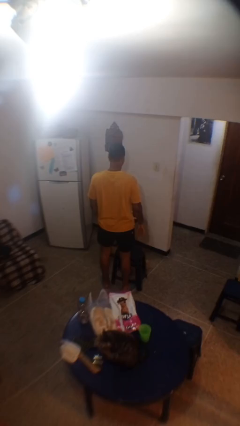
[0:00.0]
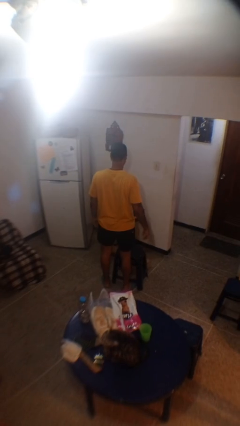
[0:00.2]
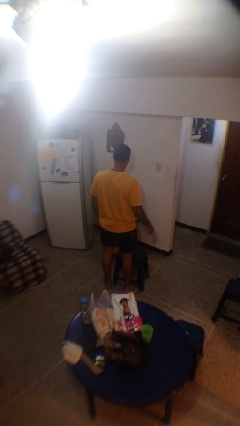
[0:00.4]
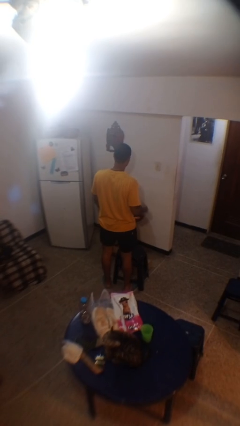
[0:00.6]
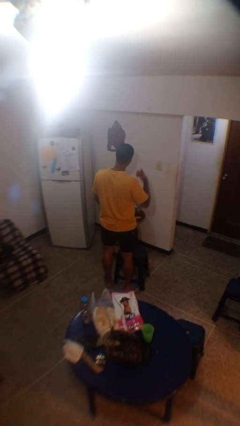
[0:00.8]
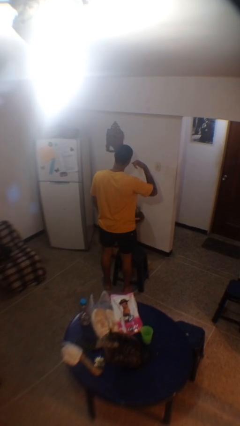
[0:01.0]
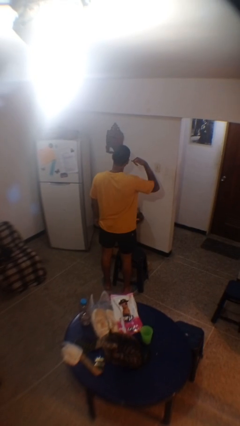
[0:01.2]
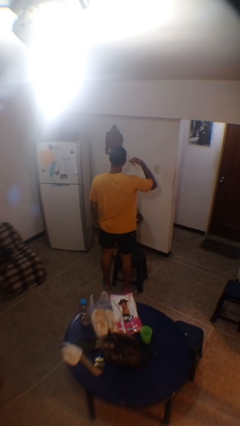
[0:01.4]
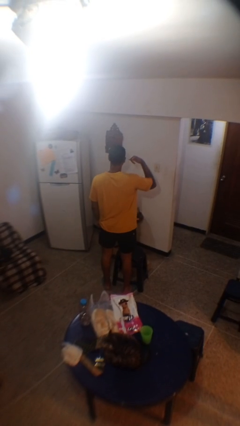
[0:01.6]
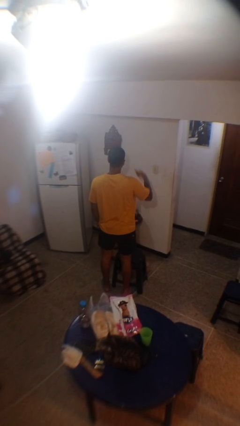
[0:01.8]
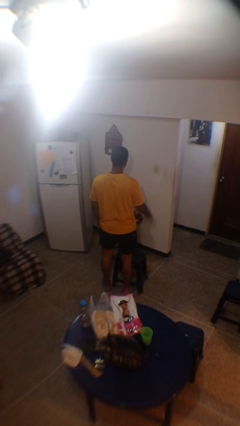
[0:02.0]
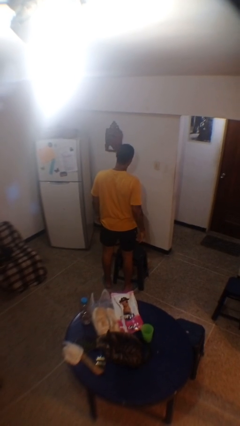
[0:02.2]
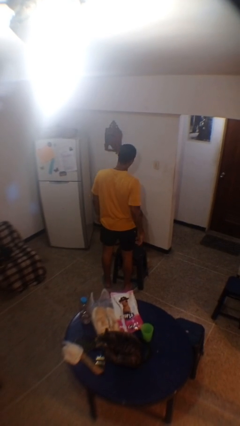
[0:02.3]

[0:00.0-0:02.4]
person gestures call me

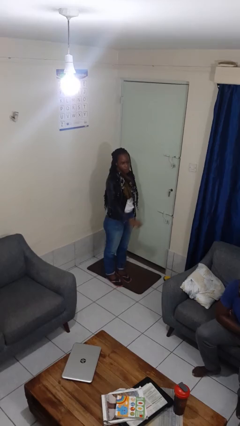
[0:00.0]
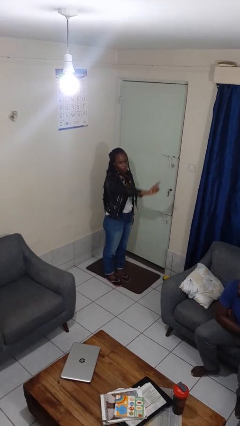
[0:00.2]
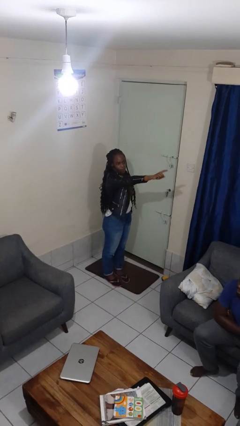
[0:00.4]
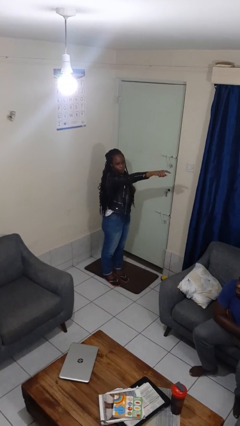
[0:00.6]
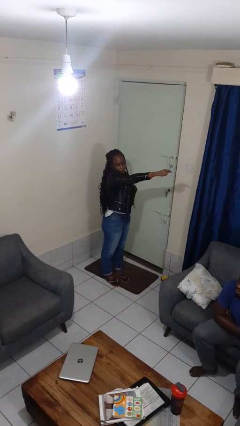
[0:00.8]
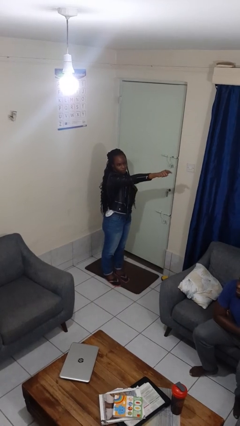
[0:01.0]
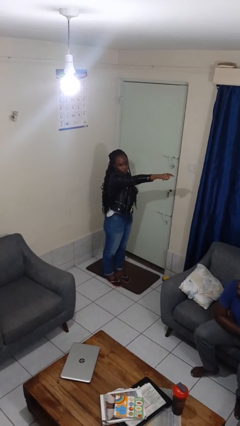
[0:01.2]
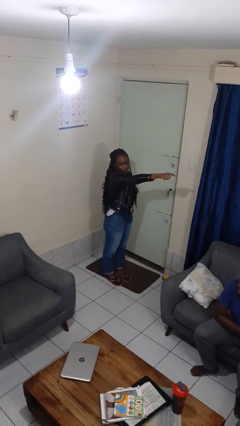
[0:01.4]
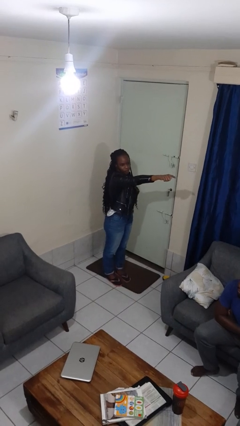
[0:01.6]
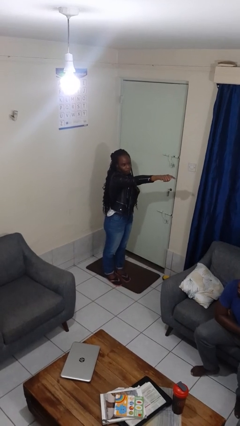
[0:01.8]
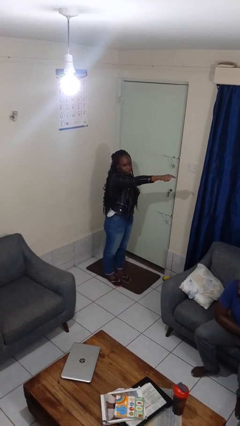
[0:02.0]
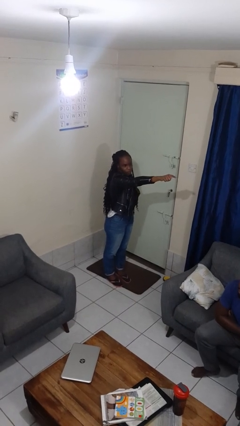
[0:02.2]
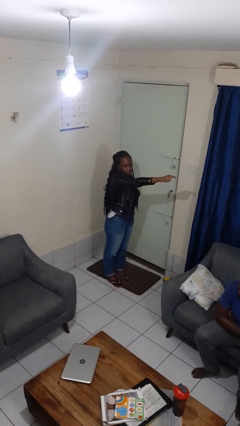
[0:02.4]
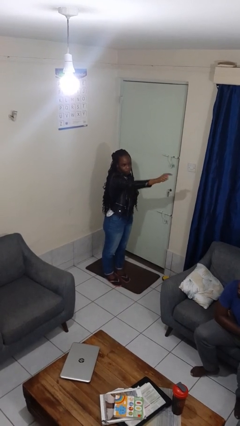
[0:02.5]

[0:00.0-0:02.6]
person points at person

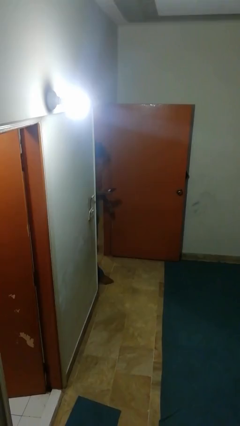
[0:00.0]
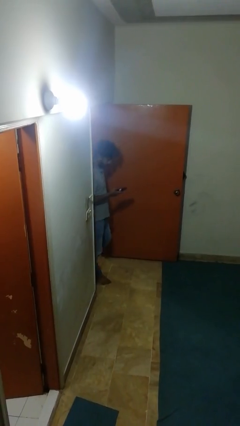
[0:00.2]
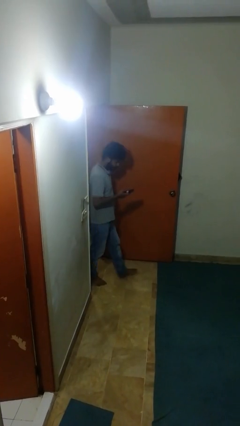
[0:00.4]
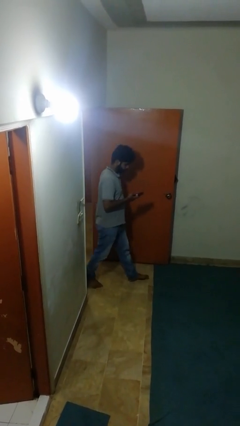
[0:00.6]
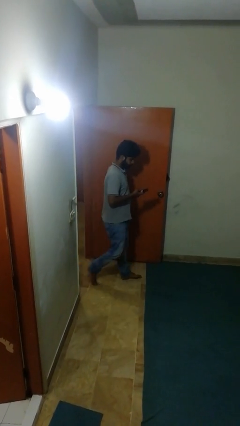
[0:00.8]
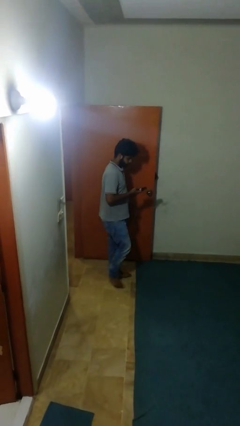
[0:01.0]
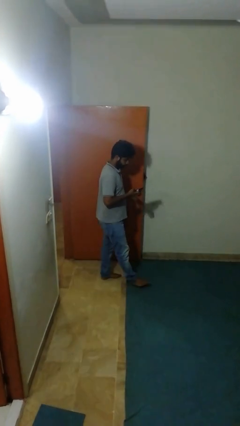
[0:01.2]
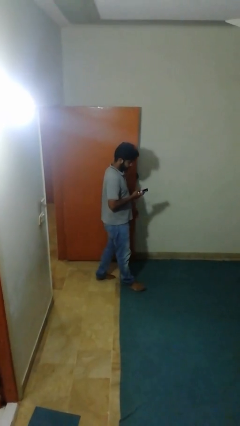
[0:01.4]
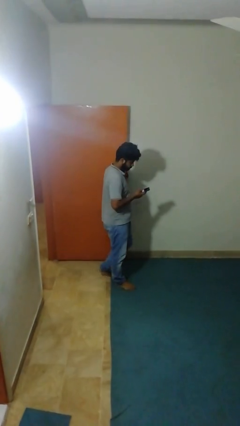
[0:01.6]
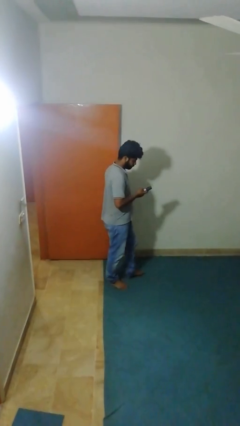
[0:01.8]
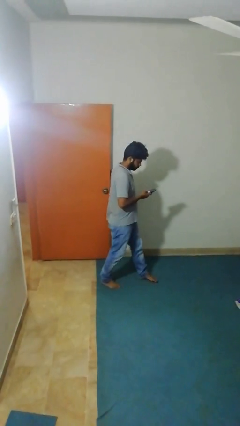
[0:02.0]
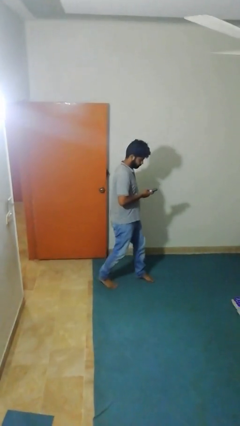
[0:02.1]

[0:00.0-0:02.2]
person enters scene through structure

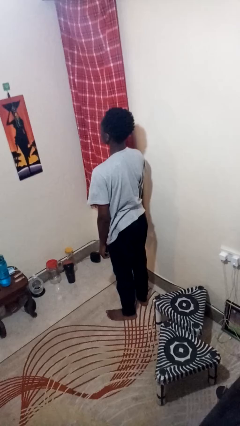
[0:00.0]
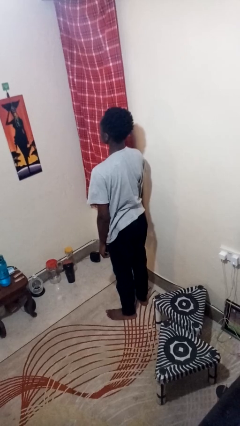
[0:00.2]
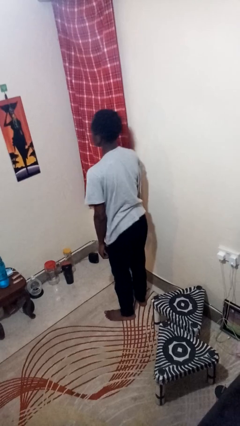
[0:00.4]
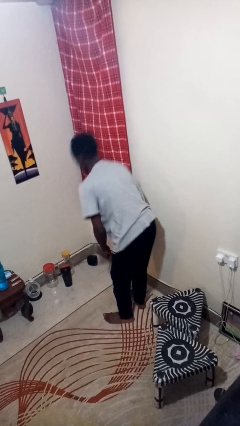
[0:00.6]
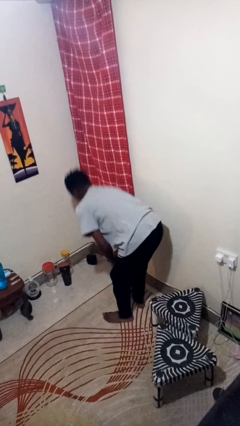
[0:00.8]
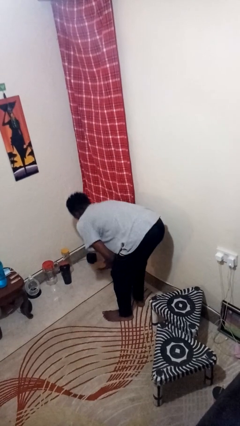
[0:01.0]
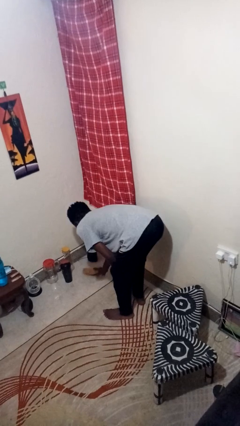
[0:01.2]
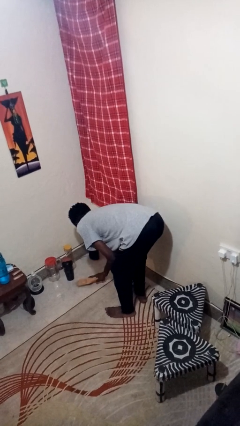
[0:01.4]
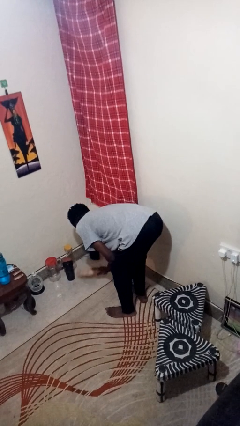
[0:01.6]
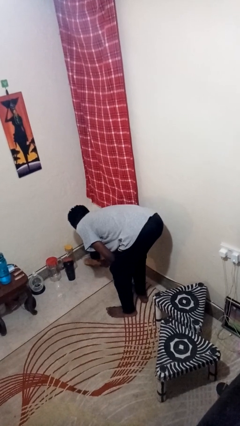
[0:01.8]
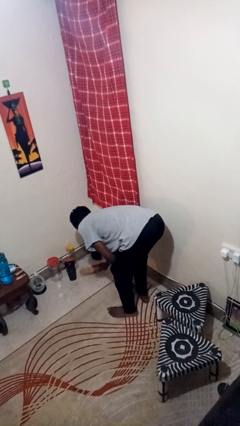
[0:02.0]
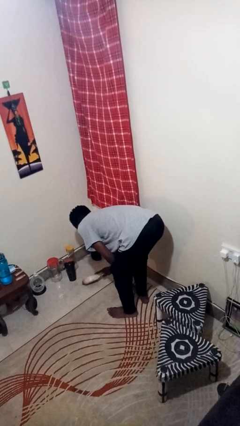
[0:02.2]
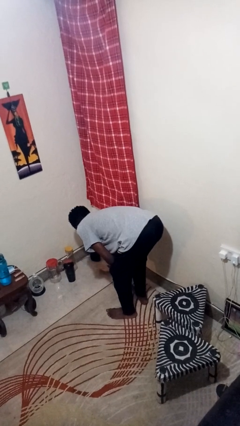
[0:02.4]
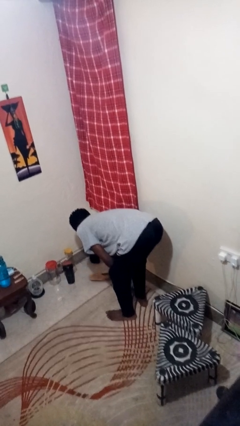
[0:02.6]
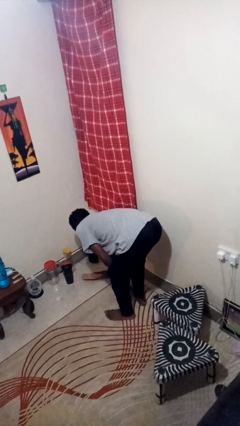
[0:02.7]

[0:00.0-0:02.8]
person sweeps floor

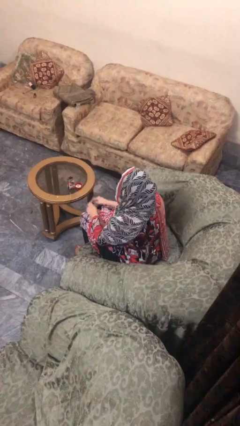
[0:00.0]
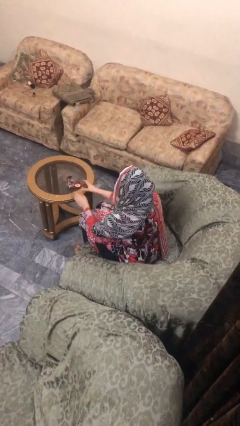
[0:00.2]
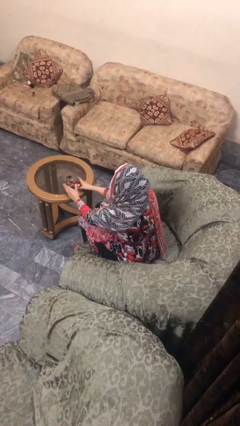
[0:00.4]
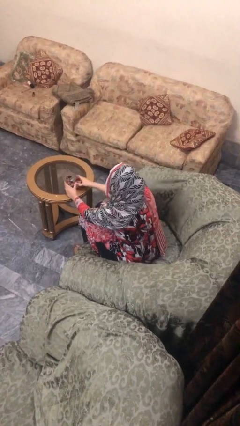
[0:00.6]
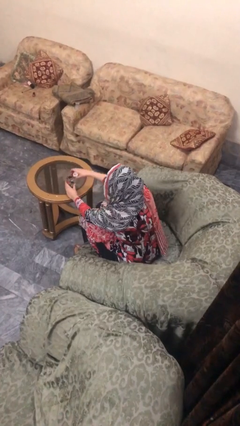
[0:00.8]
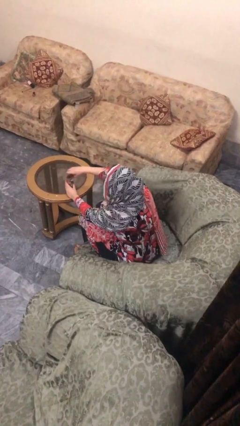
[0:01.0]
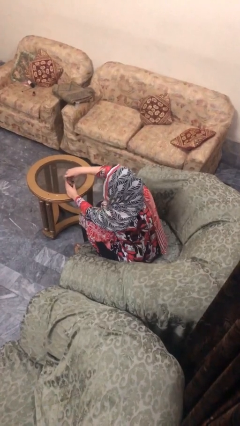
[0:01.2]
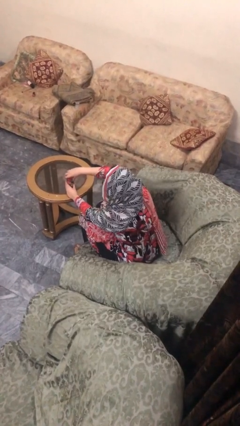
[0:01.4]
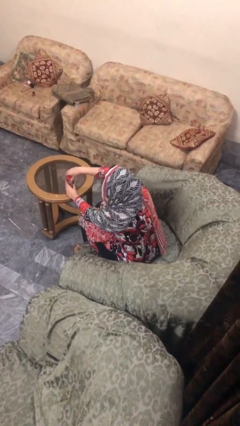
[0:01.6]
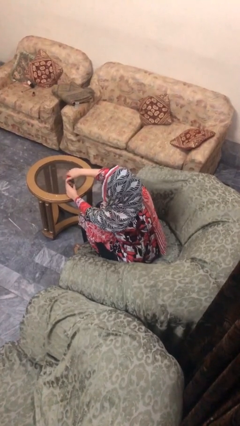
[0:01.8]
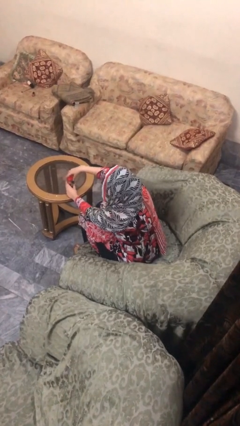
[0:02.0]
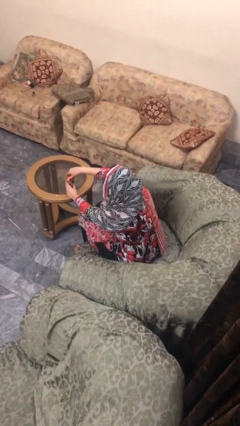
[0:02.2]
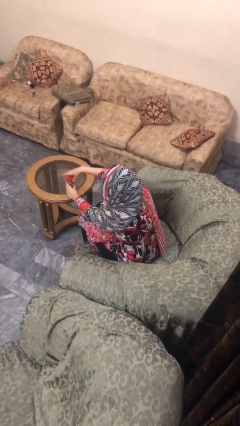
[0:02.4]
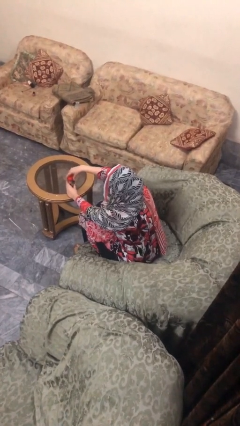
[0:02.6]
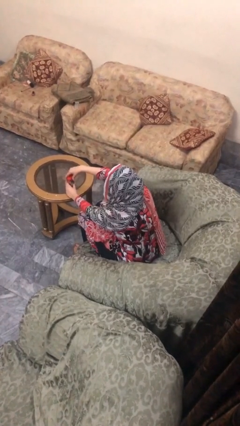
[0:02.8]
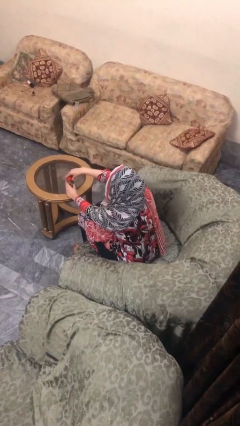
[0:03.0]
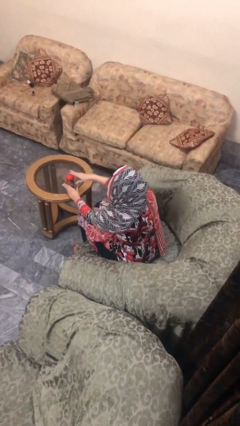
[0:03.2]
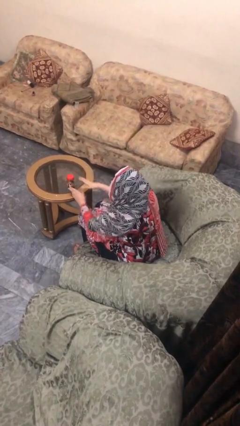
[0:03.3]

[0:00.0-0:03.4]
person closes jar

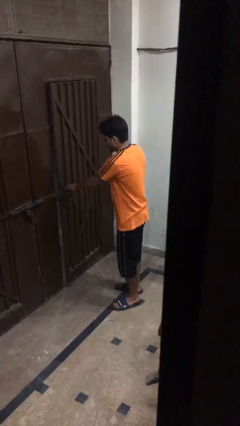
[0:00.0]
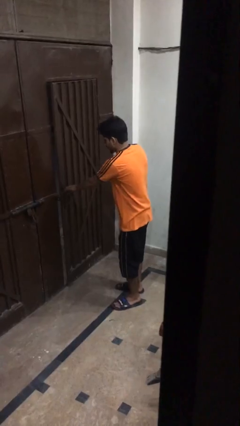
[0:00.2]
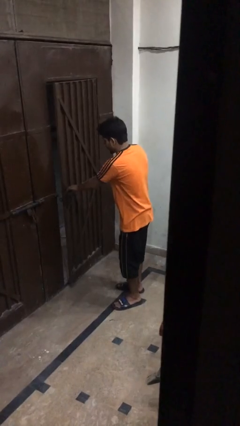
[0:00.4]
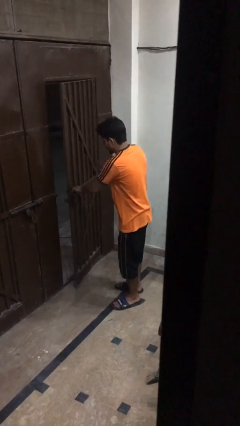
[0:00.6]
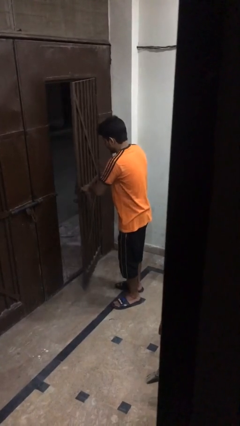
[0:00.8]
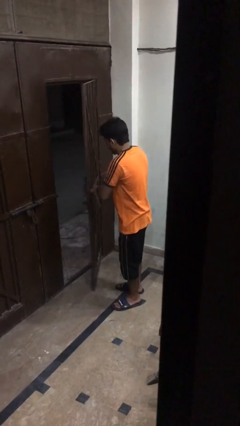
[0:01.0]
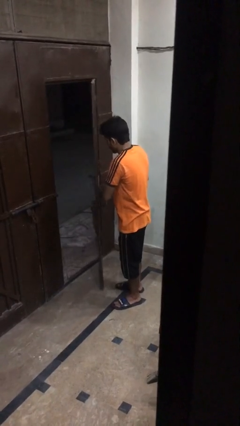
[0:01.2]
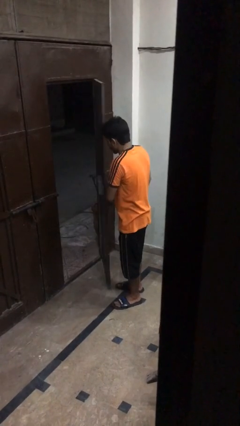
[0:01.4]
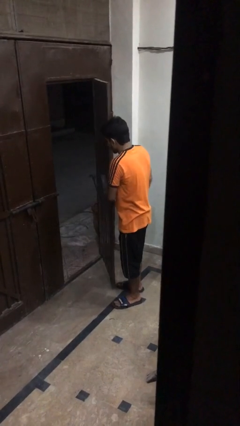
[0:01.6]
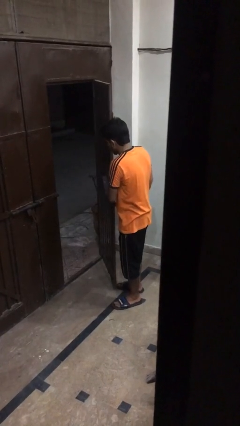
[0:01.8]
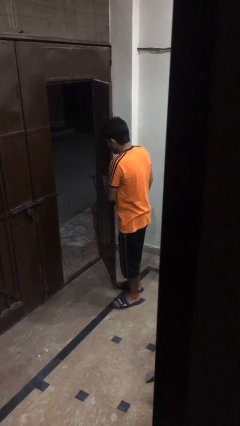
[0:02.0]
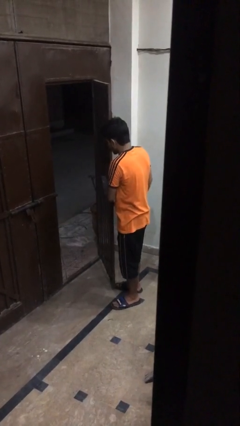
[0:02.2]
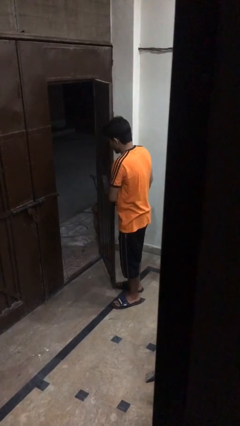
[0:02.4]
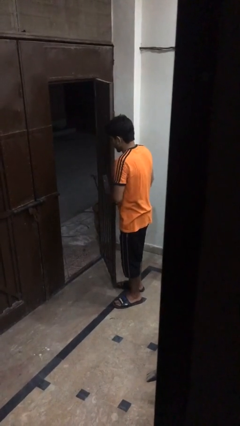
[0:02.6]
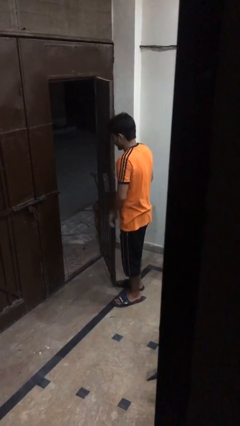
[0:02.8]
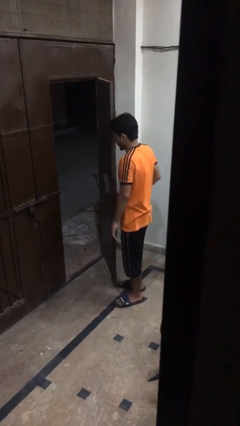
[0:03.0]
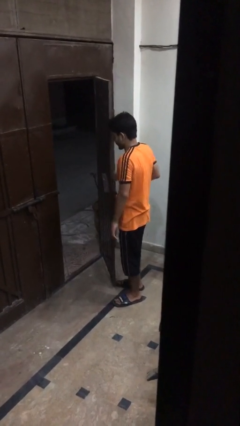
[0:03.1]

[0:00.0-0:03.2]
person opens gate

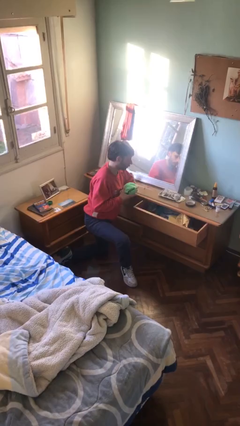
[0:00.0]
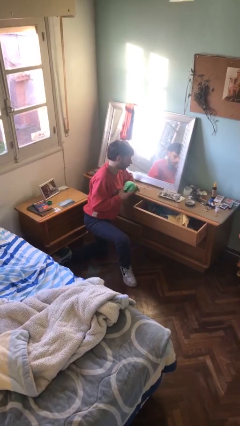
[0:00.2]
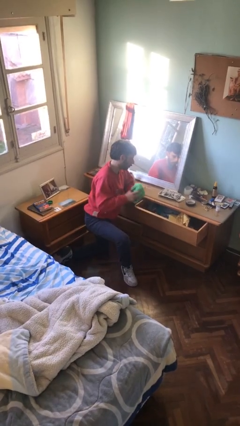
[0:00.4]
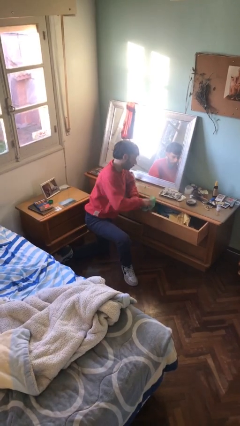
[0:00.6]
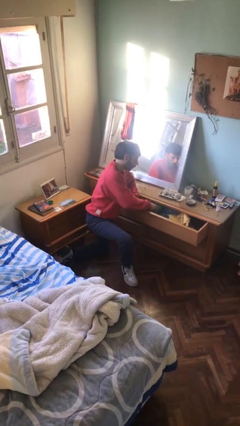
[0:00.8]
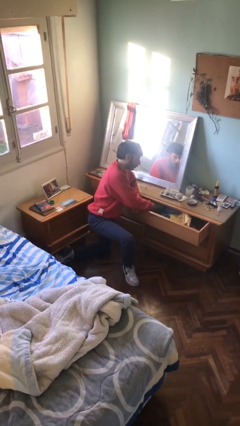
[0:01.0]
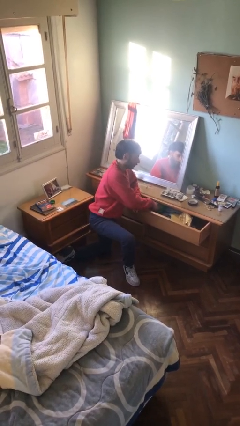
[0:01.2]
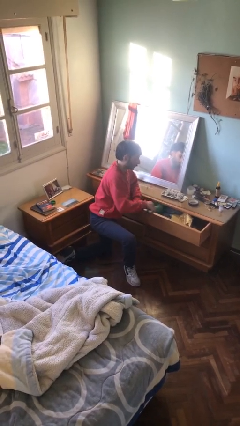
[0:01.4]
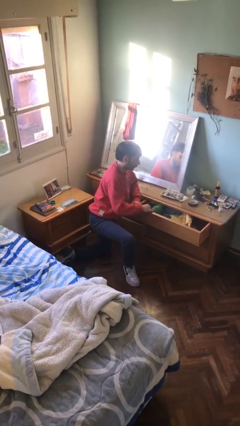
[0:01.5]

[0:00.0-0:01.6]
person puts clothes into dresser
